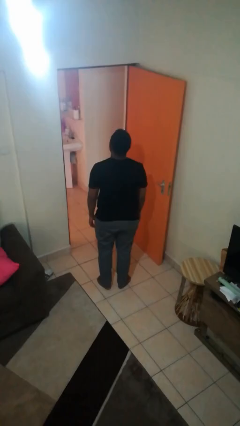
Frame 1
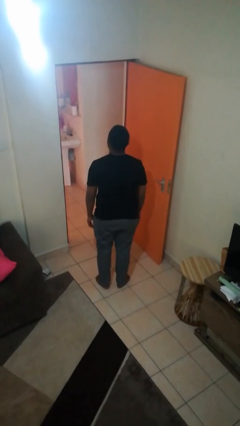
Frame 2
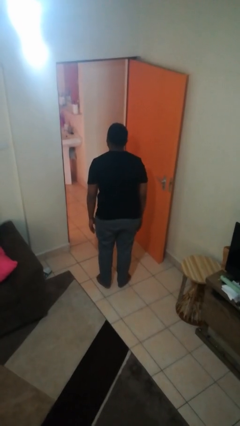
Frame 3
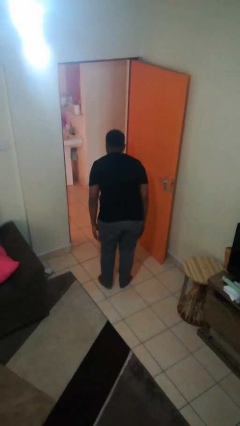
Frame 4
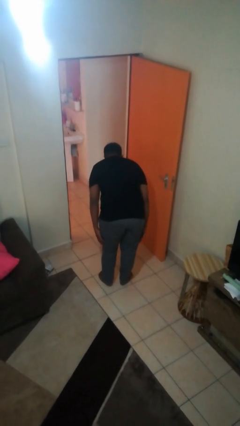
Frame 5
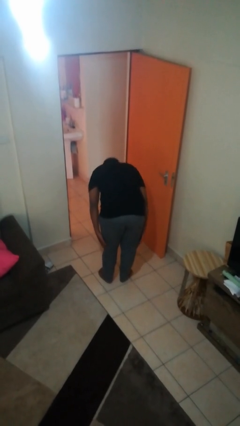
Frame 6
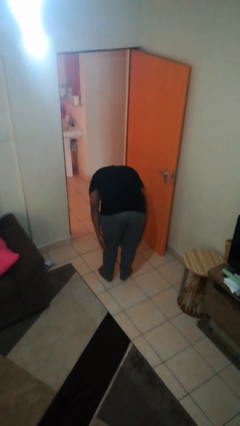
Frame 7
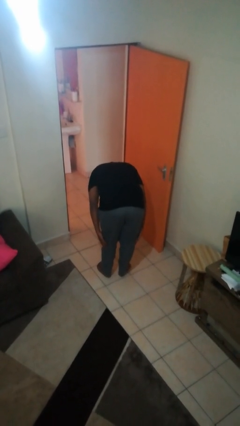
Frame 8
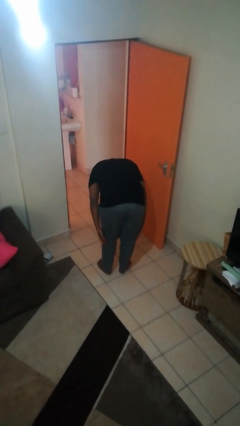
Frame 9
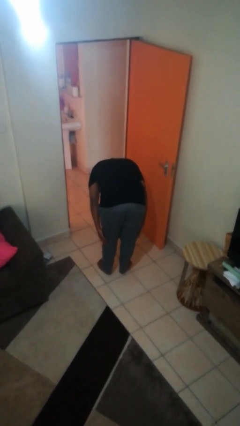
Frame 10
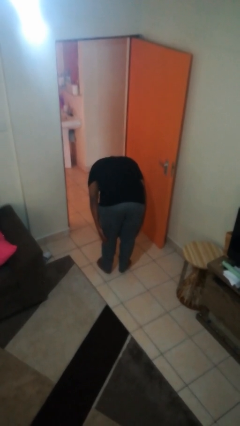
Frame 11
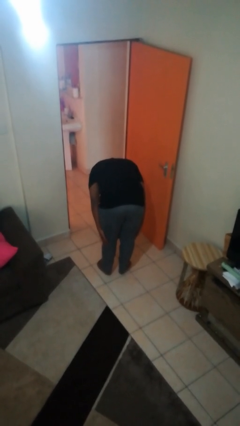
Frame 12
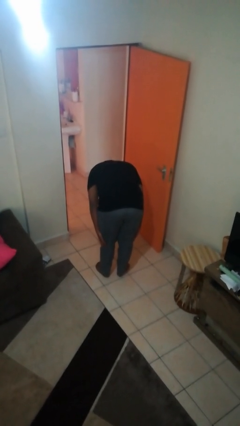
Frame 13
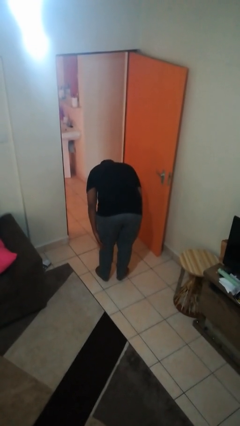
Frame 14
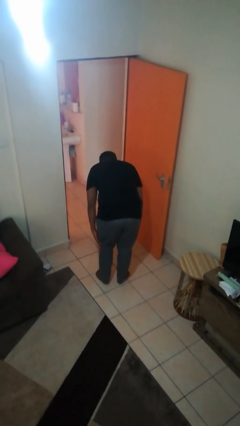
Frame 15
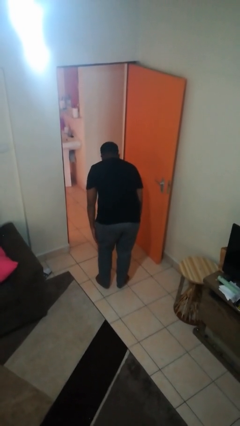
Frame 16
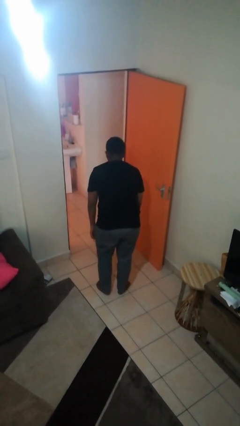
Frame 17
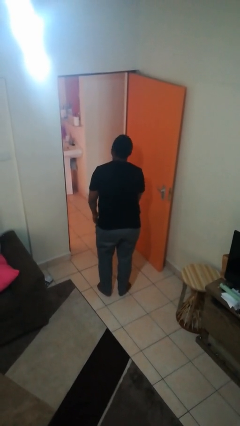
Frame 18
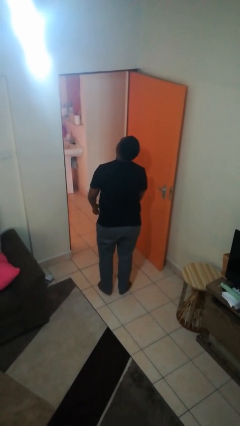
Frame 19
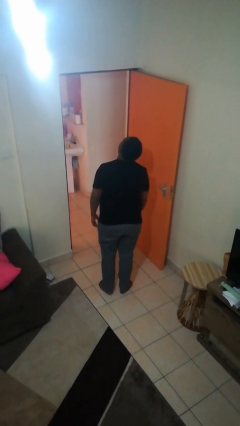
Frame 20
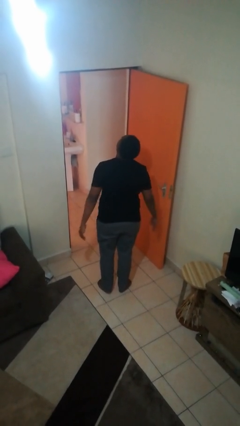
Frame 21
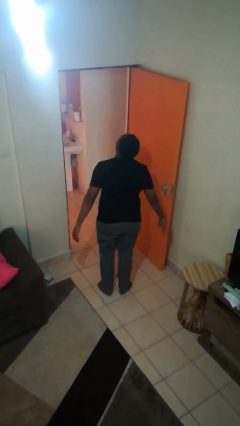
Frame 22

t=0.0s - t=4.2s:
person bows

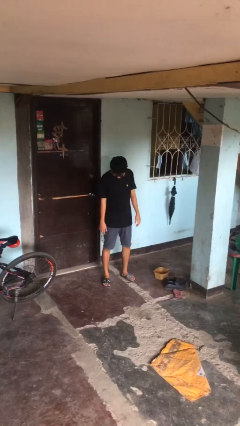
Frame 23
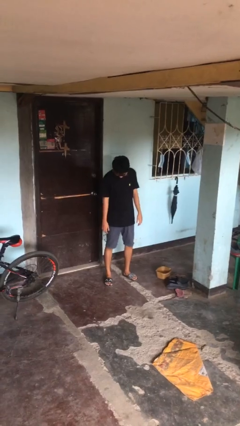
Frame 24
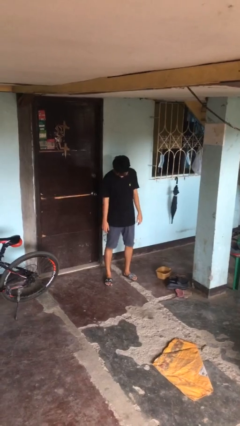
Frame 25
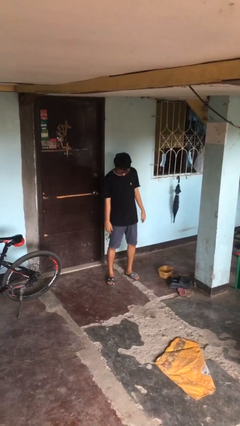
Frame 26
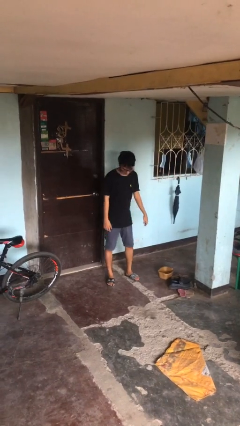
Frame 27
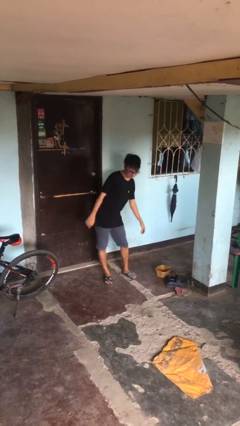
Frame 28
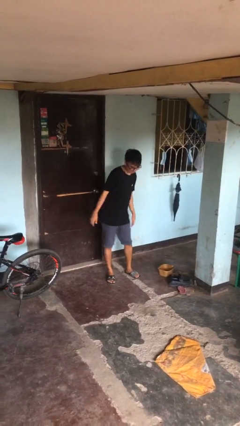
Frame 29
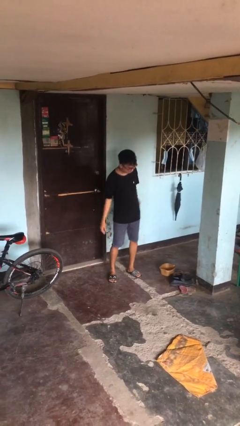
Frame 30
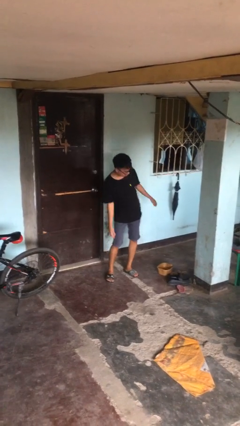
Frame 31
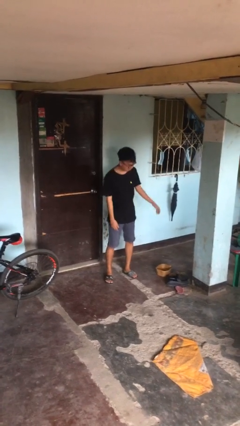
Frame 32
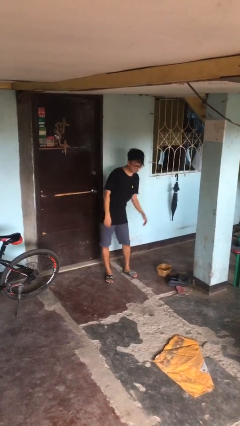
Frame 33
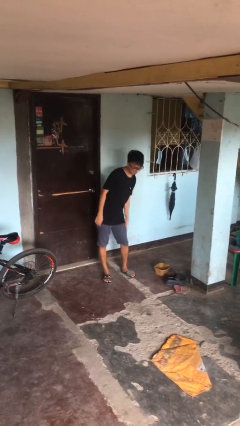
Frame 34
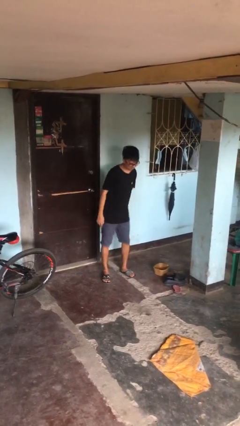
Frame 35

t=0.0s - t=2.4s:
person wiggles hips

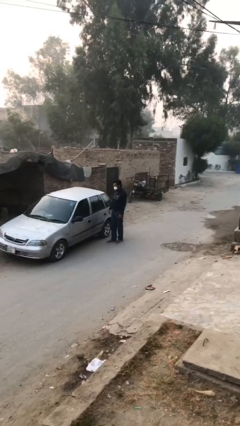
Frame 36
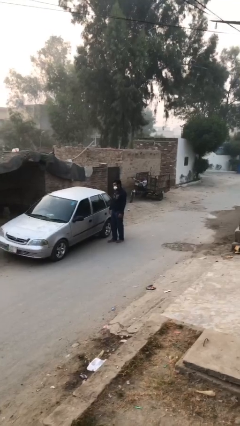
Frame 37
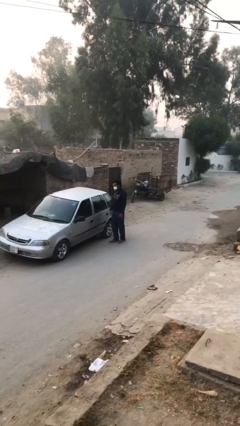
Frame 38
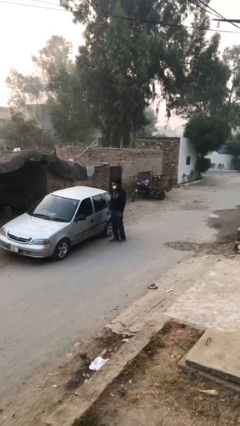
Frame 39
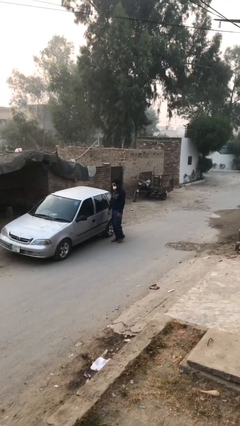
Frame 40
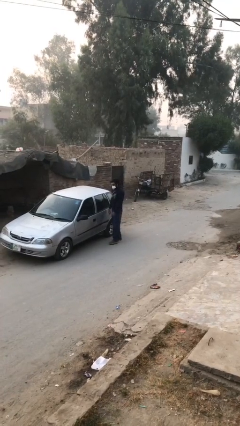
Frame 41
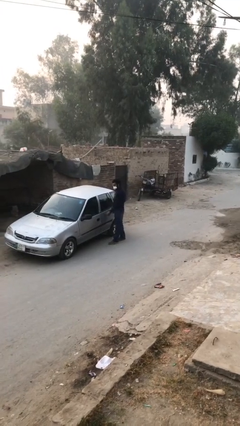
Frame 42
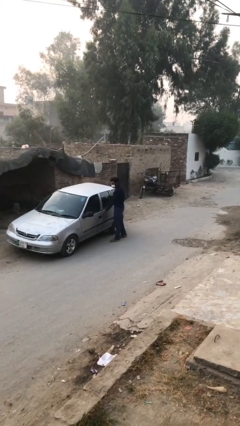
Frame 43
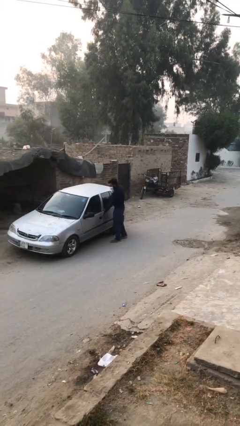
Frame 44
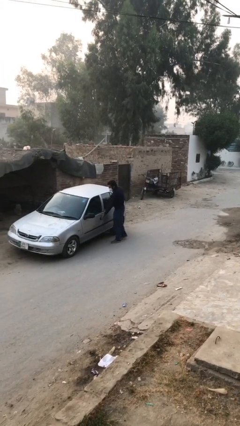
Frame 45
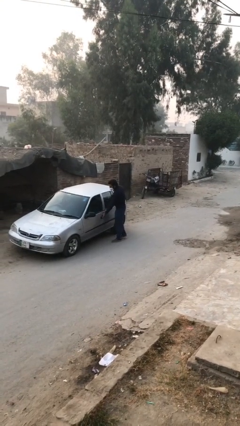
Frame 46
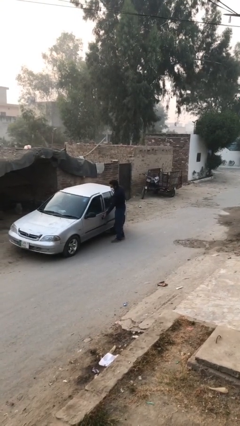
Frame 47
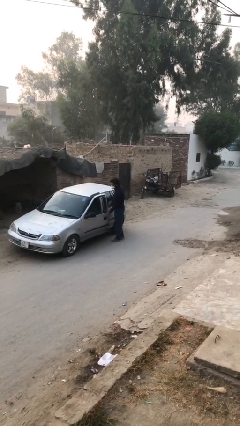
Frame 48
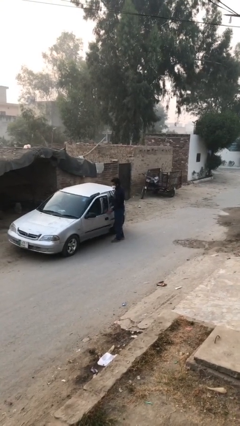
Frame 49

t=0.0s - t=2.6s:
person opens car door

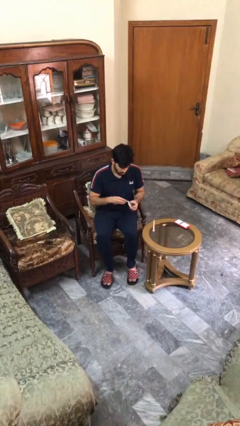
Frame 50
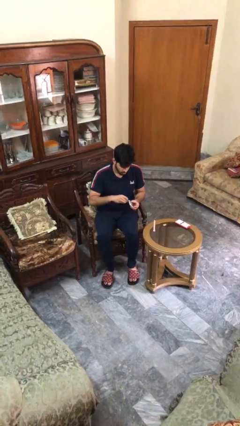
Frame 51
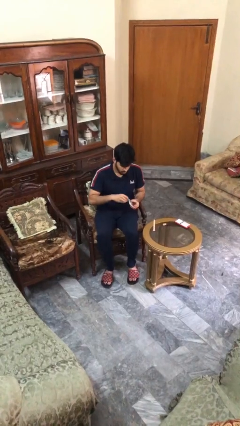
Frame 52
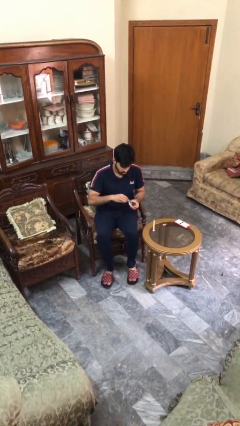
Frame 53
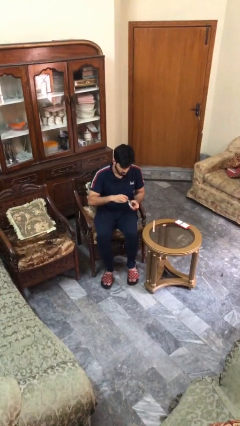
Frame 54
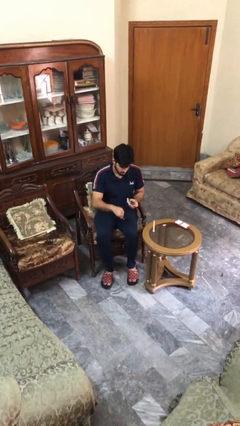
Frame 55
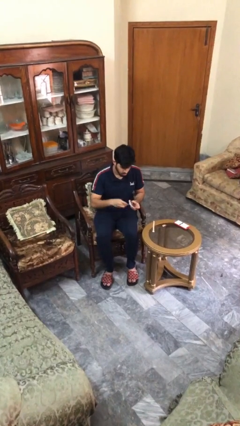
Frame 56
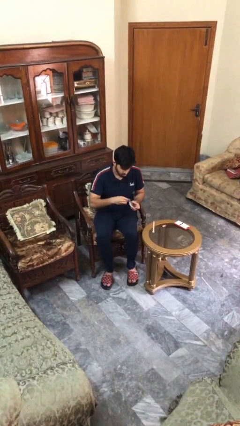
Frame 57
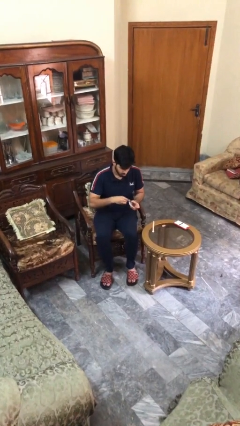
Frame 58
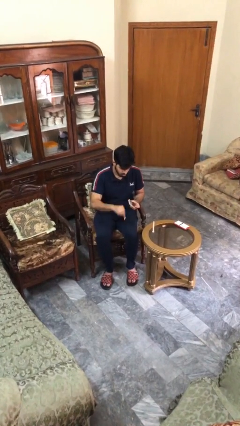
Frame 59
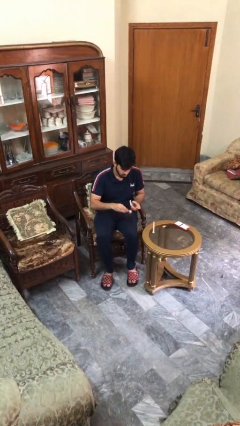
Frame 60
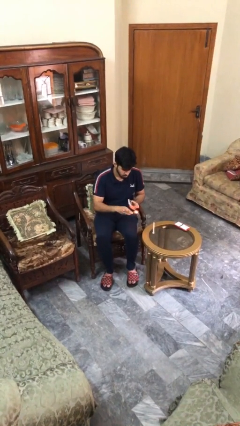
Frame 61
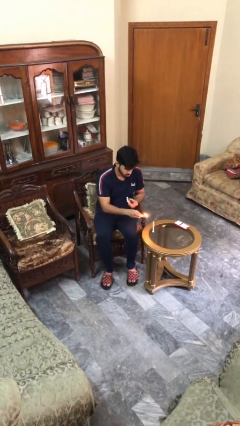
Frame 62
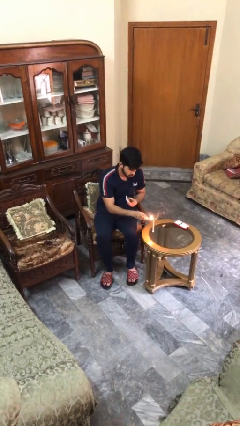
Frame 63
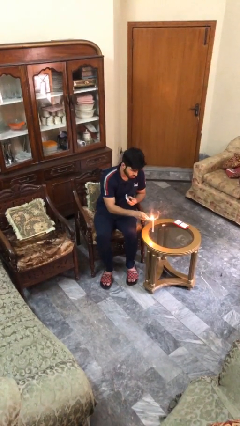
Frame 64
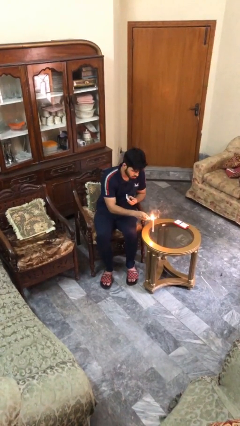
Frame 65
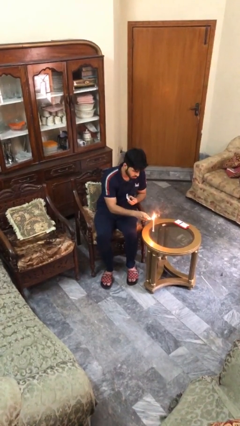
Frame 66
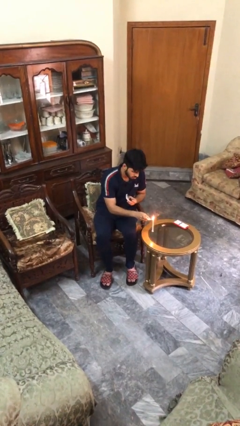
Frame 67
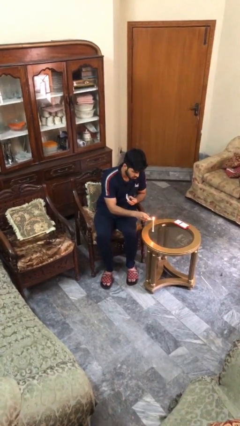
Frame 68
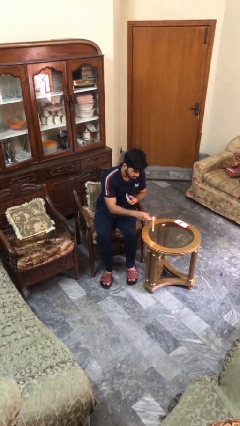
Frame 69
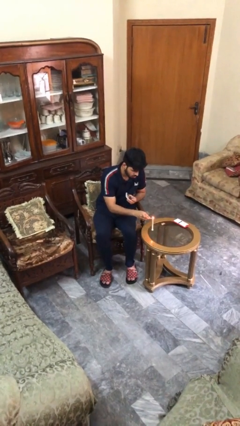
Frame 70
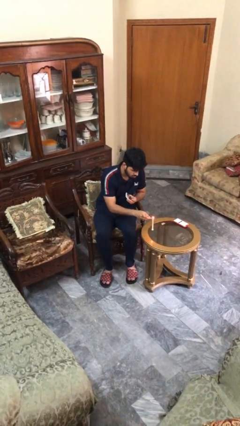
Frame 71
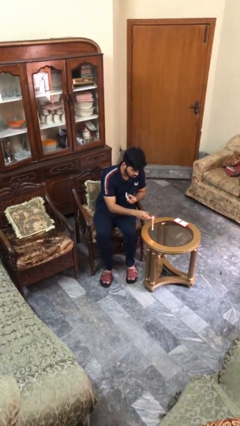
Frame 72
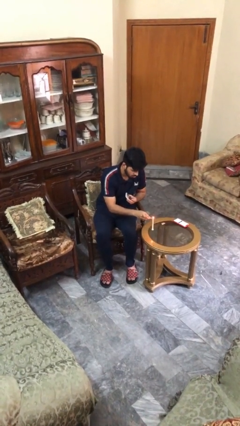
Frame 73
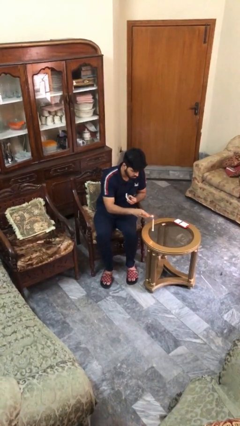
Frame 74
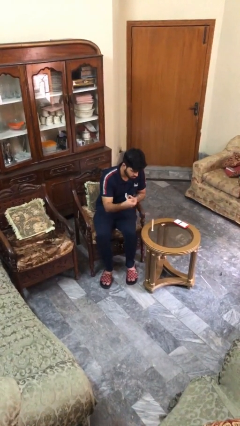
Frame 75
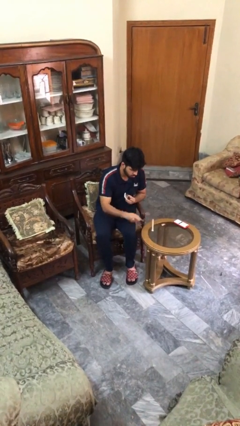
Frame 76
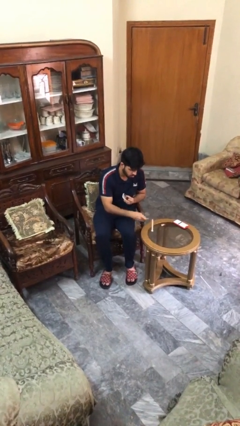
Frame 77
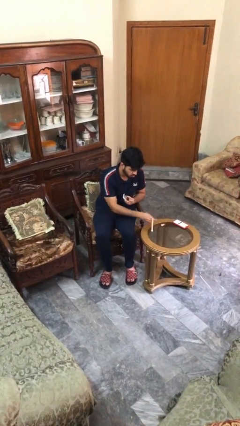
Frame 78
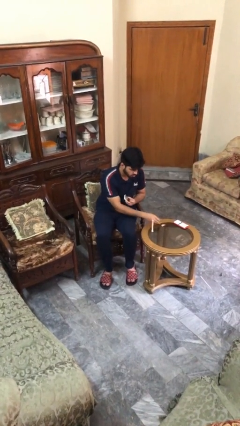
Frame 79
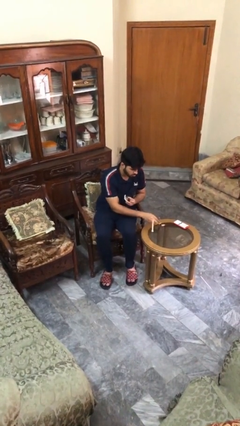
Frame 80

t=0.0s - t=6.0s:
person lights candle

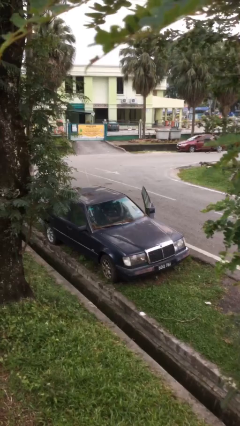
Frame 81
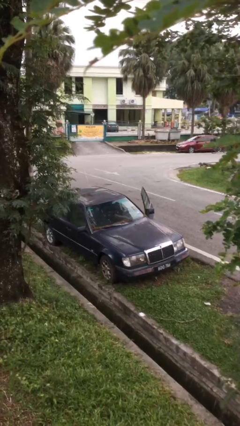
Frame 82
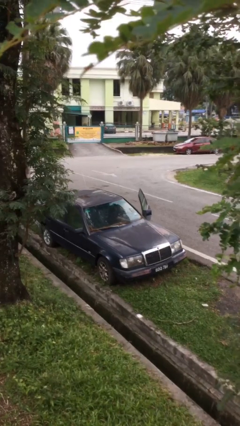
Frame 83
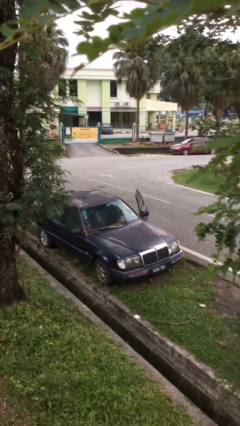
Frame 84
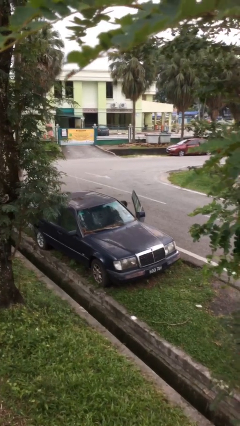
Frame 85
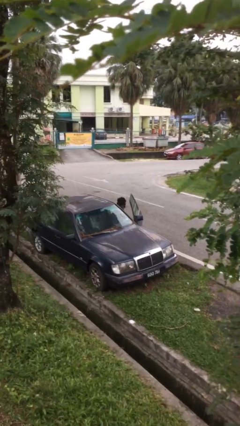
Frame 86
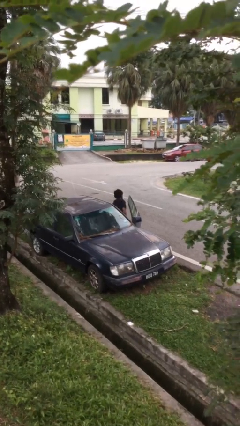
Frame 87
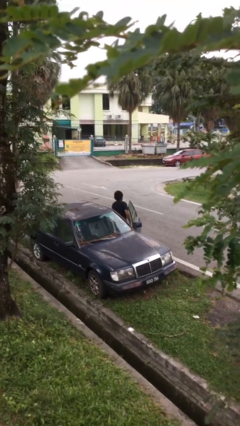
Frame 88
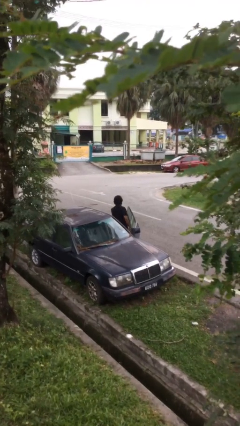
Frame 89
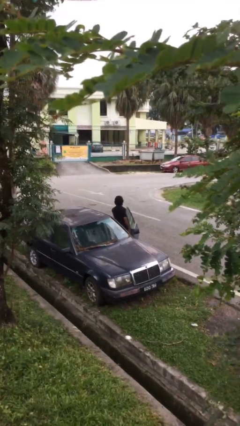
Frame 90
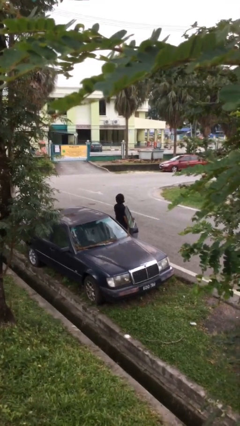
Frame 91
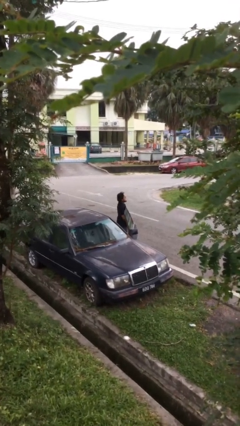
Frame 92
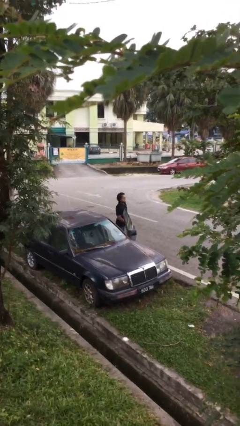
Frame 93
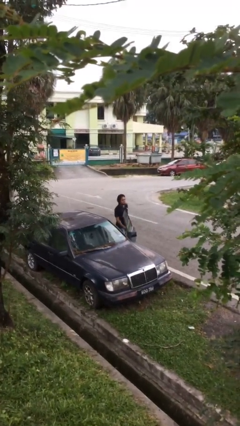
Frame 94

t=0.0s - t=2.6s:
person exits car
